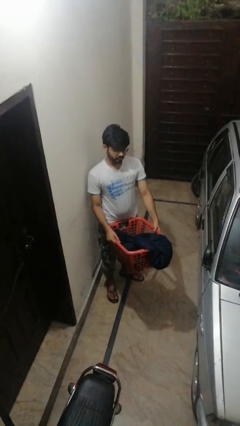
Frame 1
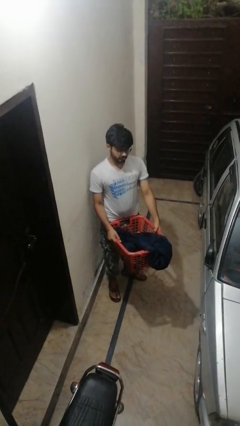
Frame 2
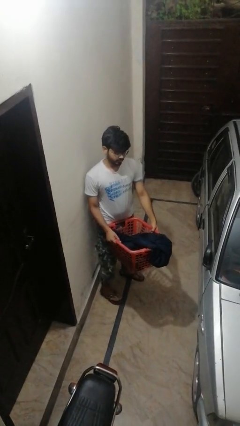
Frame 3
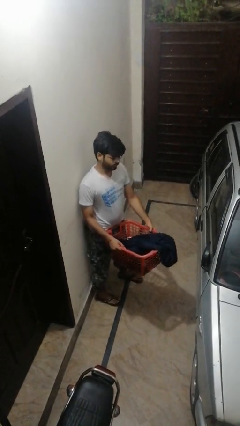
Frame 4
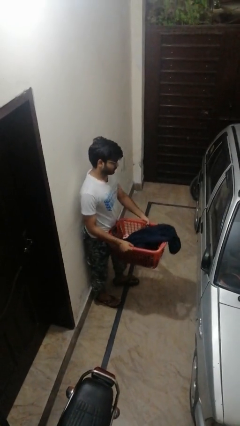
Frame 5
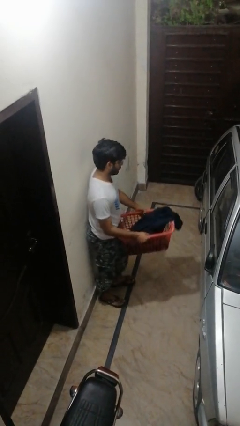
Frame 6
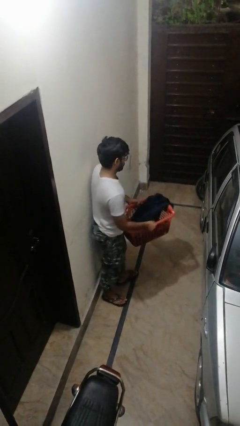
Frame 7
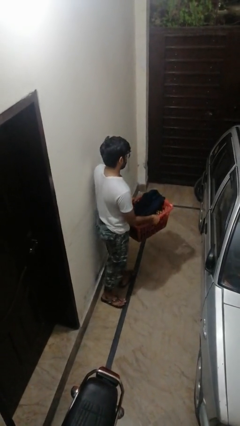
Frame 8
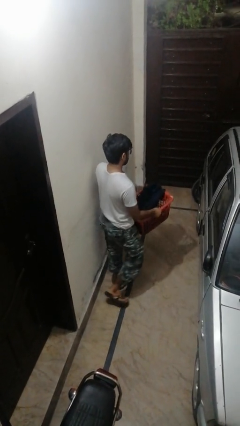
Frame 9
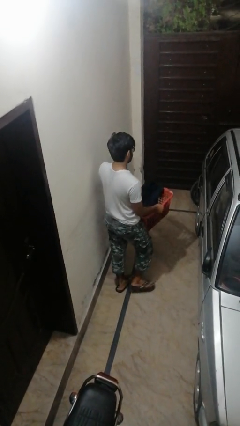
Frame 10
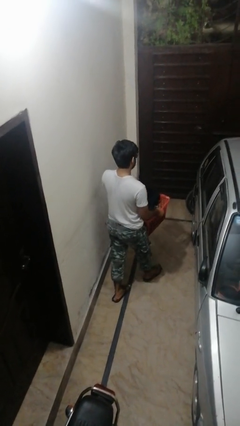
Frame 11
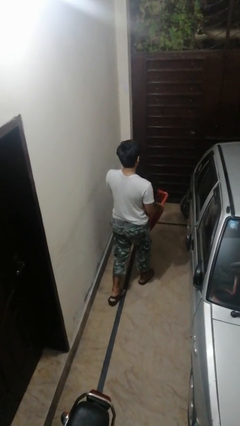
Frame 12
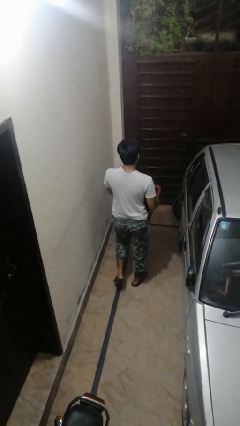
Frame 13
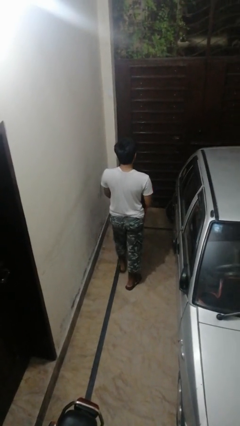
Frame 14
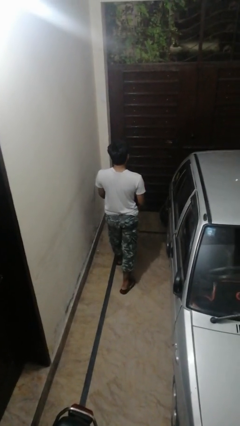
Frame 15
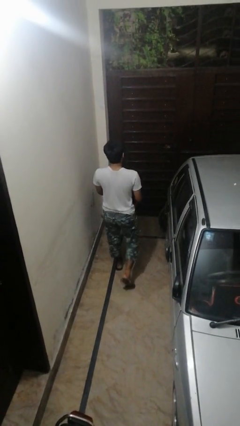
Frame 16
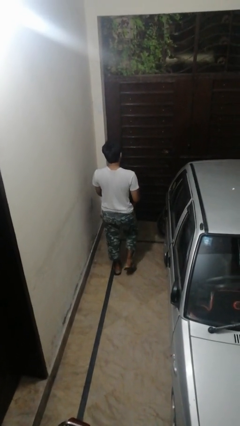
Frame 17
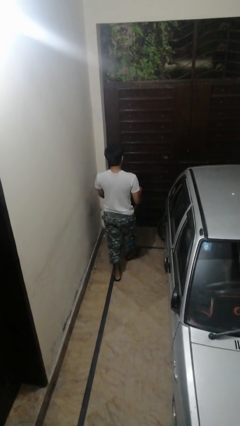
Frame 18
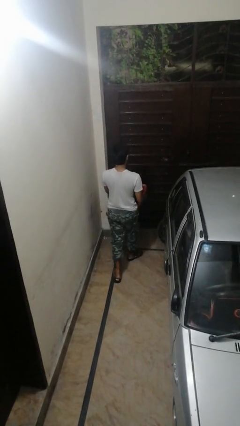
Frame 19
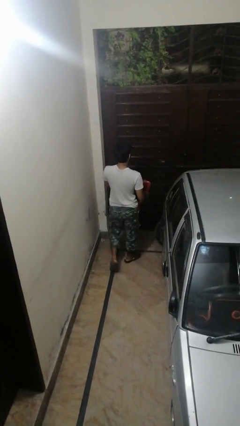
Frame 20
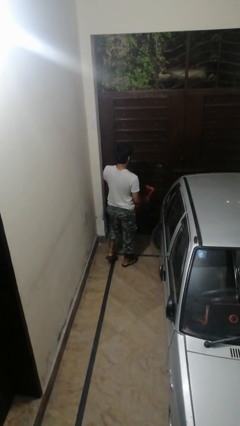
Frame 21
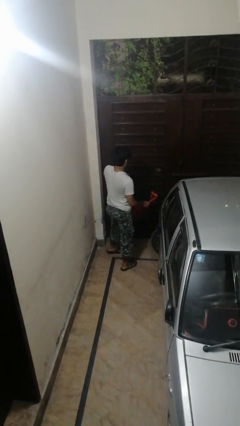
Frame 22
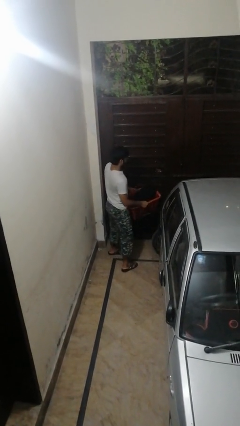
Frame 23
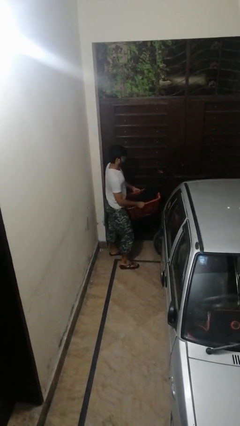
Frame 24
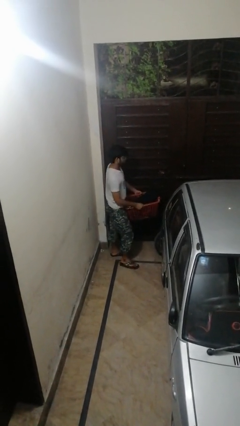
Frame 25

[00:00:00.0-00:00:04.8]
person carries laundry basket

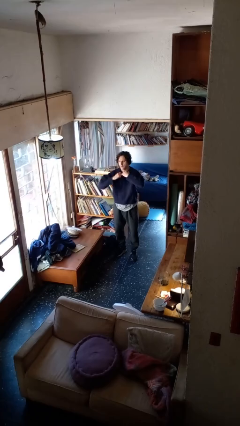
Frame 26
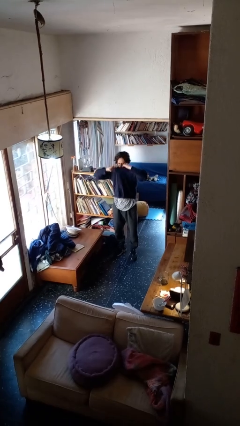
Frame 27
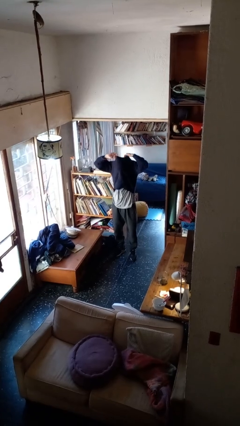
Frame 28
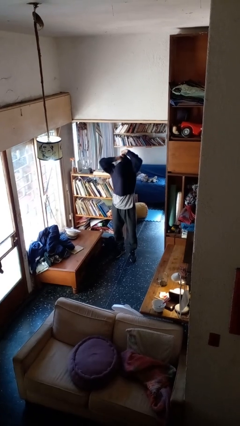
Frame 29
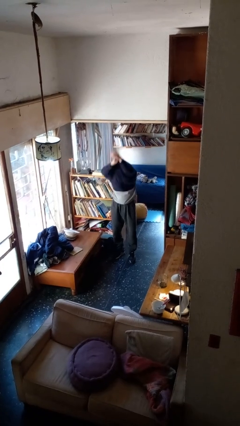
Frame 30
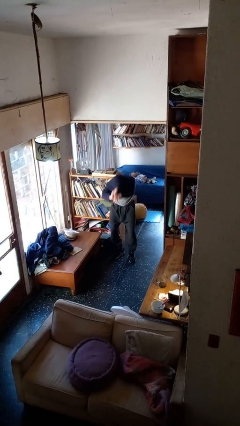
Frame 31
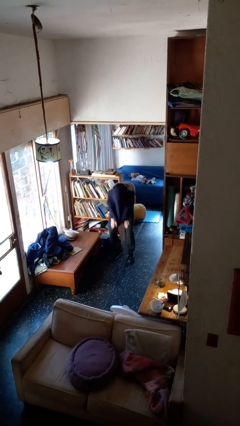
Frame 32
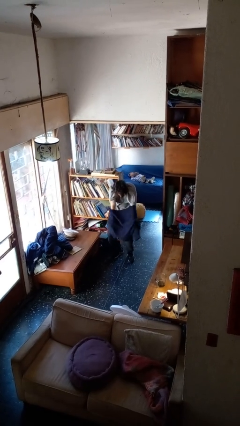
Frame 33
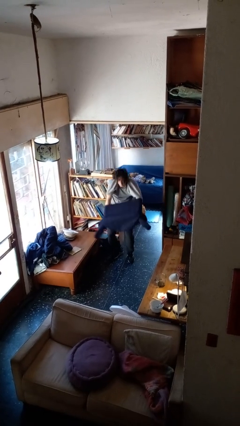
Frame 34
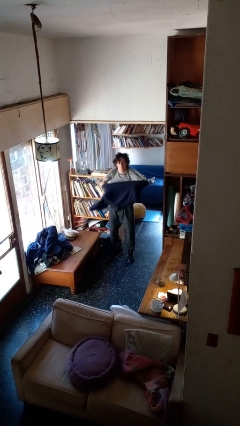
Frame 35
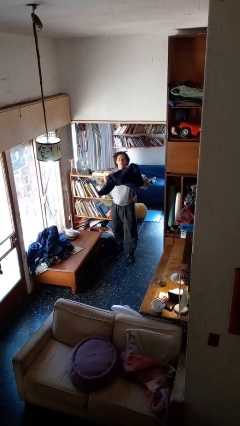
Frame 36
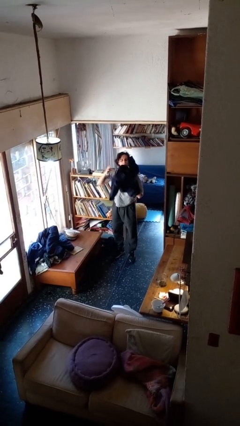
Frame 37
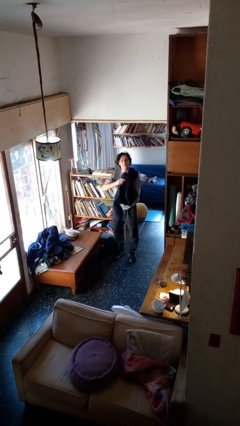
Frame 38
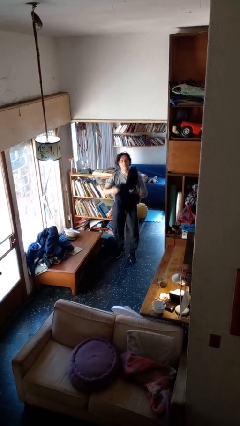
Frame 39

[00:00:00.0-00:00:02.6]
person takes off shirt

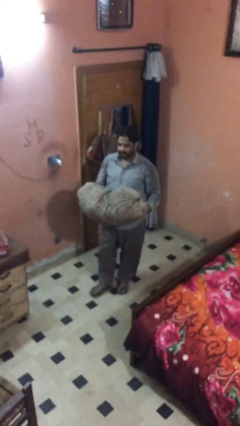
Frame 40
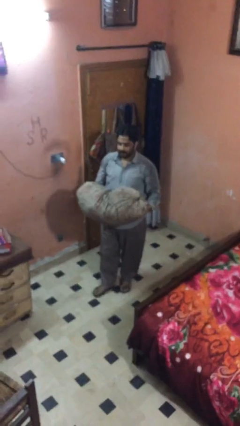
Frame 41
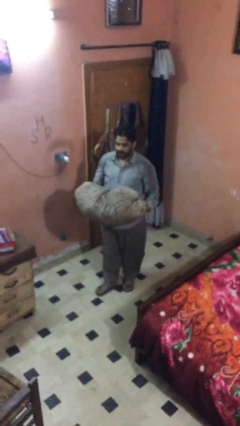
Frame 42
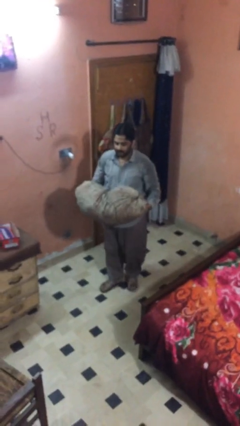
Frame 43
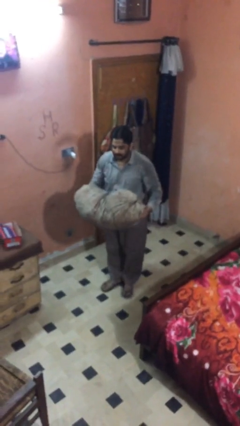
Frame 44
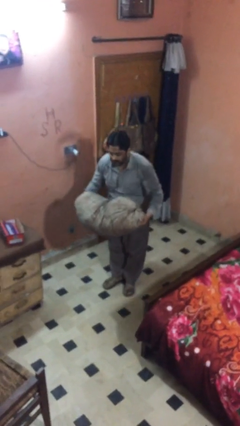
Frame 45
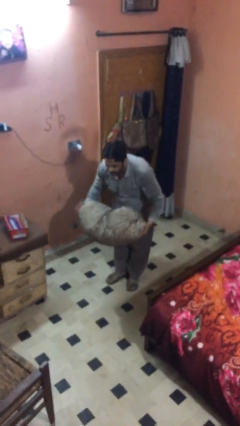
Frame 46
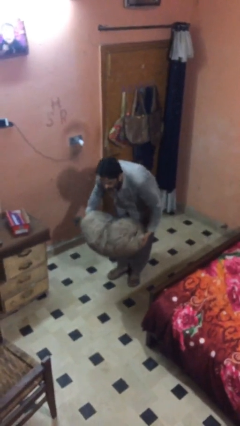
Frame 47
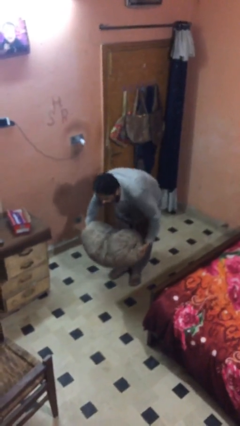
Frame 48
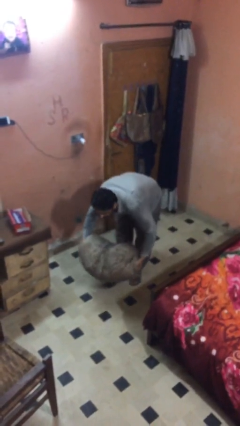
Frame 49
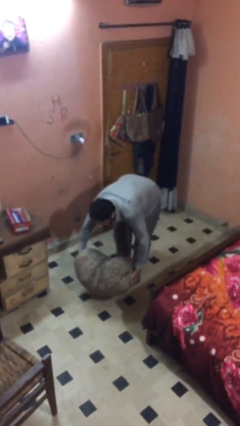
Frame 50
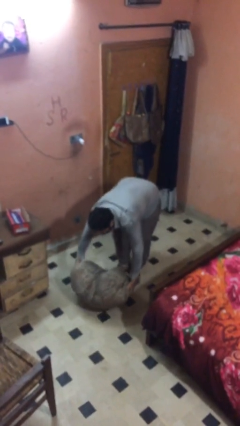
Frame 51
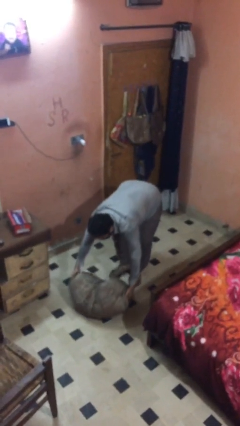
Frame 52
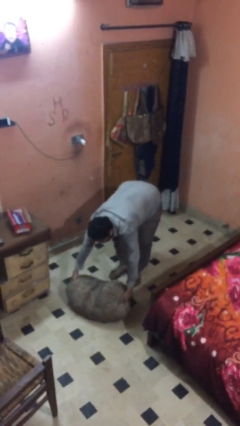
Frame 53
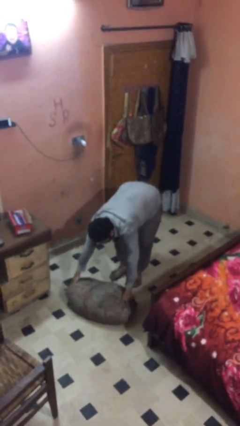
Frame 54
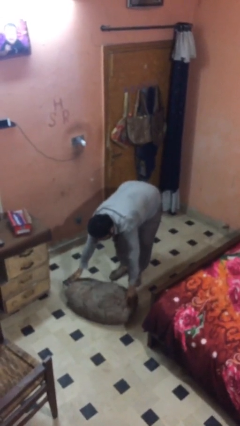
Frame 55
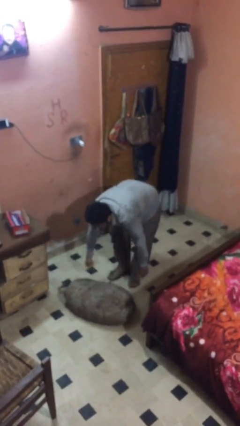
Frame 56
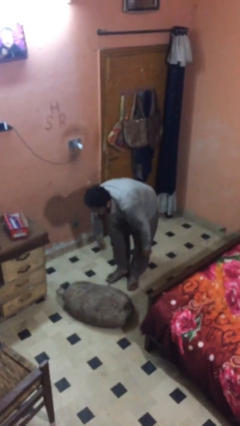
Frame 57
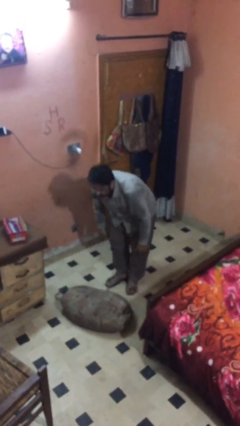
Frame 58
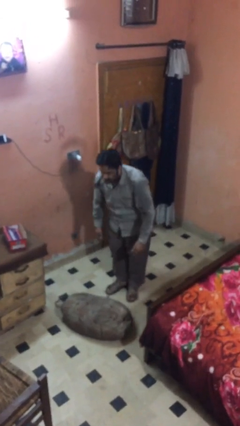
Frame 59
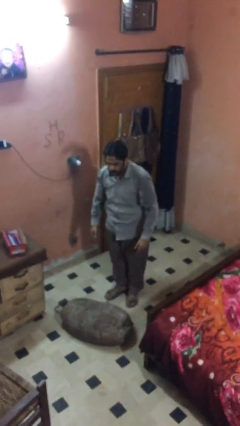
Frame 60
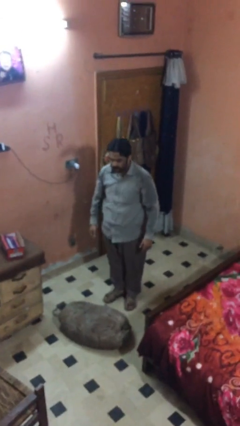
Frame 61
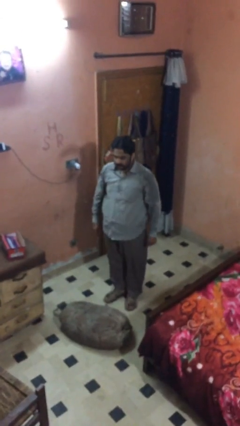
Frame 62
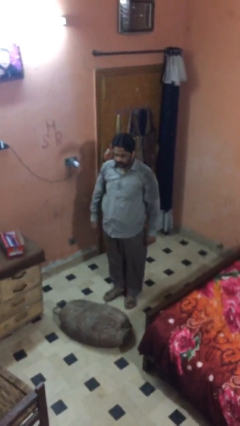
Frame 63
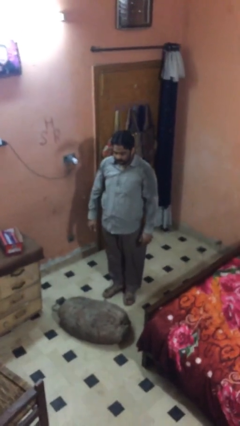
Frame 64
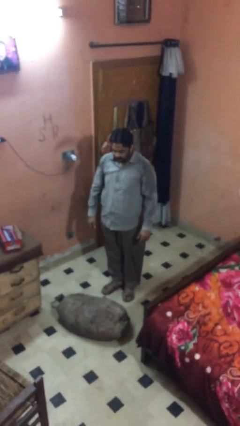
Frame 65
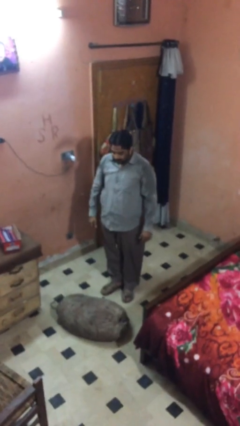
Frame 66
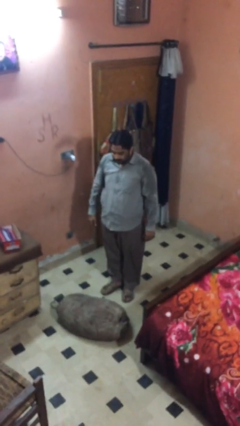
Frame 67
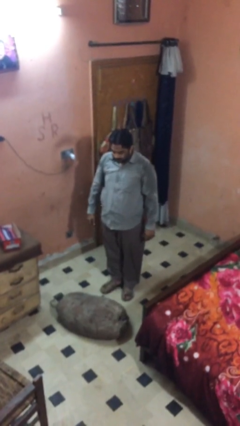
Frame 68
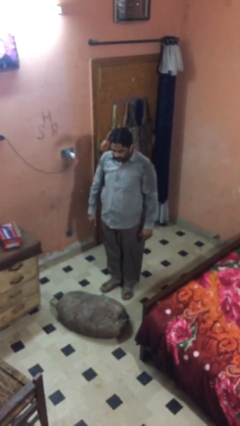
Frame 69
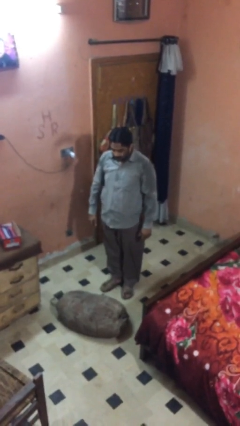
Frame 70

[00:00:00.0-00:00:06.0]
person puts down object on floor

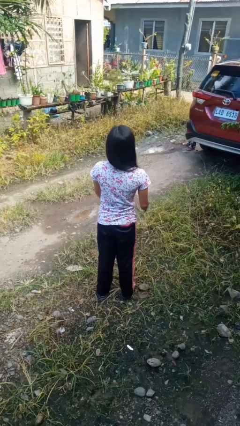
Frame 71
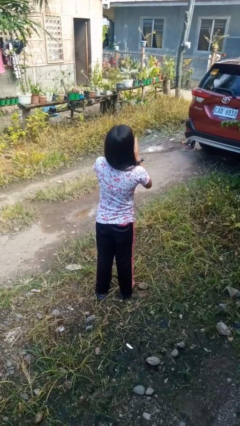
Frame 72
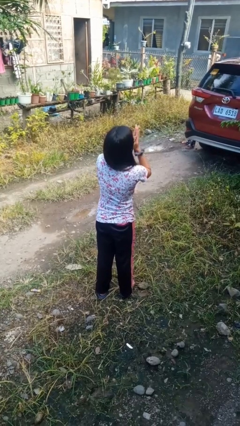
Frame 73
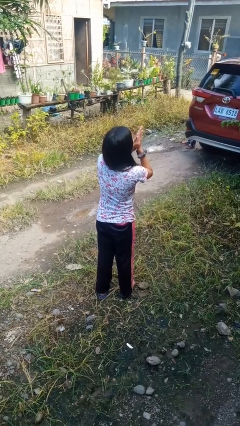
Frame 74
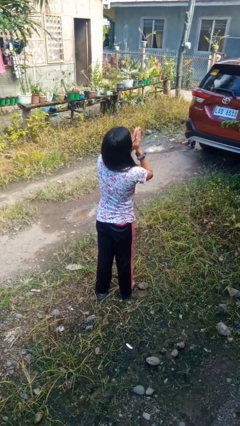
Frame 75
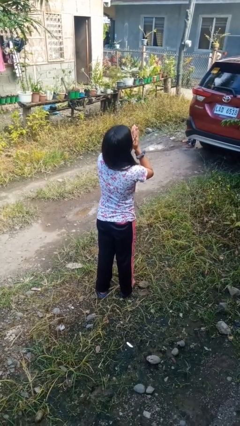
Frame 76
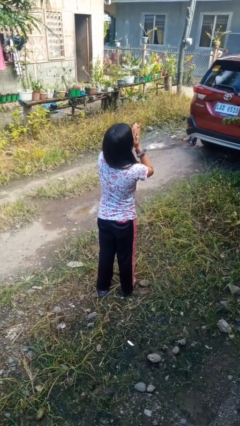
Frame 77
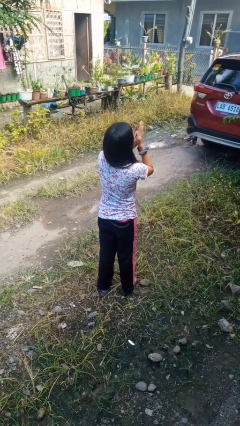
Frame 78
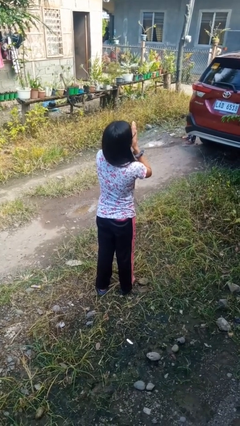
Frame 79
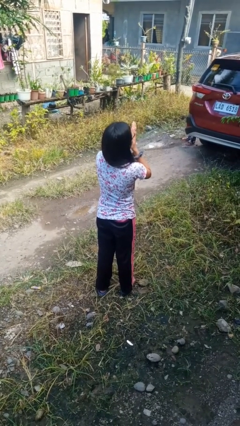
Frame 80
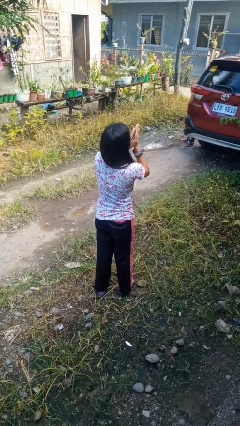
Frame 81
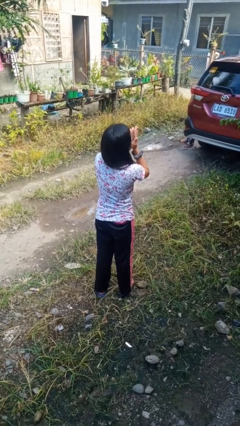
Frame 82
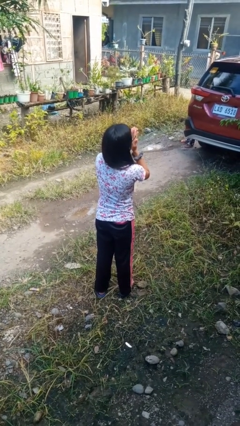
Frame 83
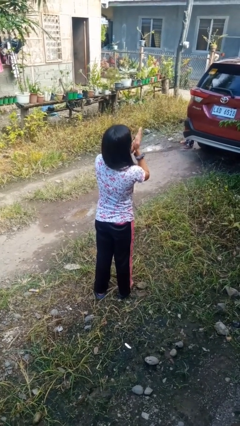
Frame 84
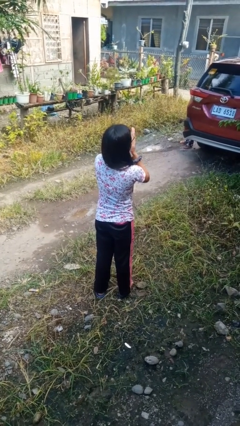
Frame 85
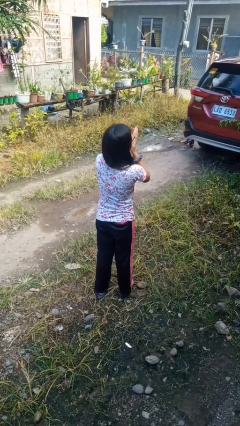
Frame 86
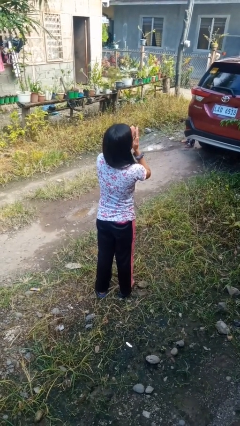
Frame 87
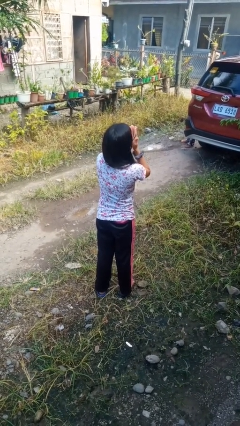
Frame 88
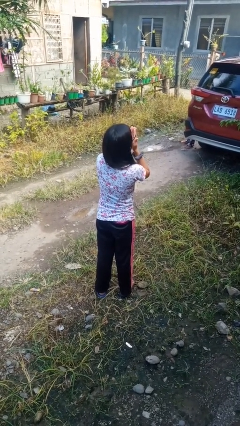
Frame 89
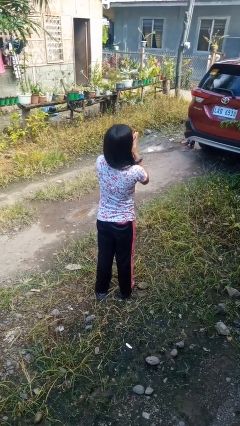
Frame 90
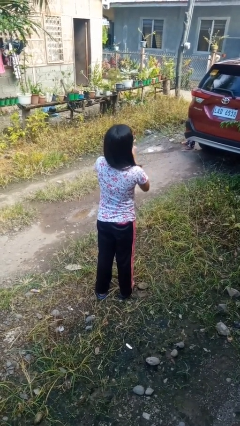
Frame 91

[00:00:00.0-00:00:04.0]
person blows into hands

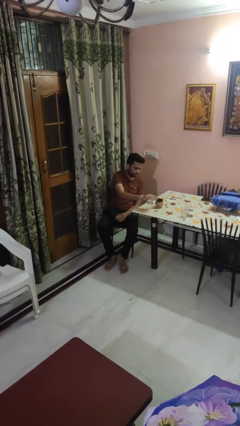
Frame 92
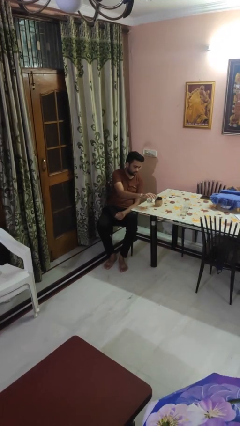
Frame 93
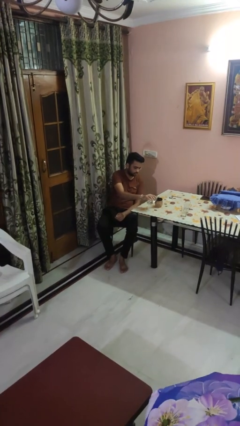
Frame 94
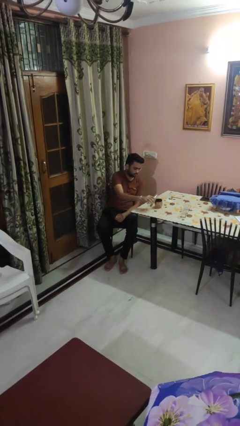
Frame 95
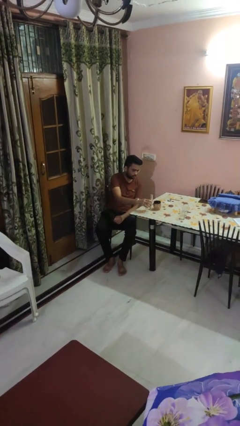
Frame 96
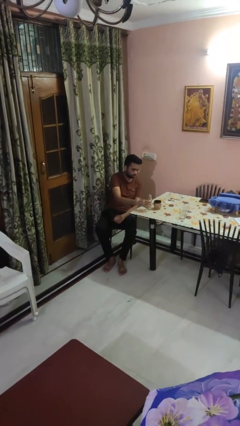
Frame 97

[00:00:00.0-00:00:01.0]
person pours liquid into cup
